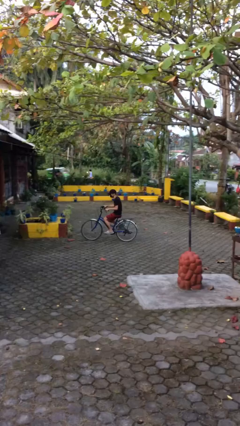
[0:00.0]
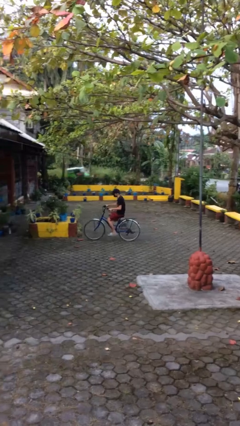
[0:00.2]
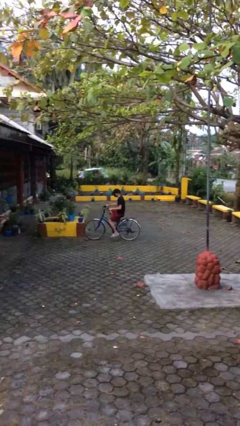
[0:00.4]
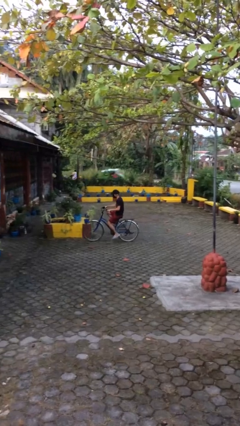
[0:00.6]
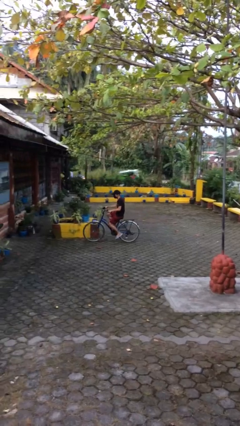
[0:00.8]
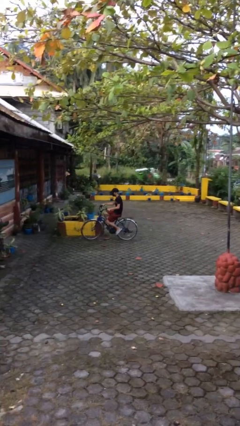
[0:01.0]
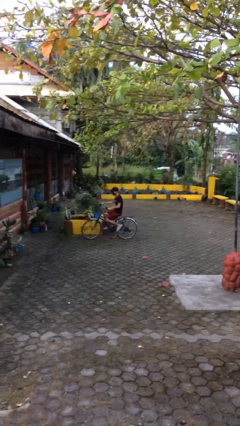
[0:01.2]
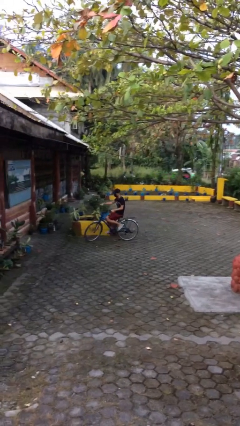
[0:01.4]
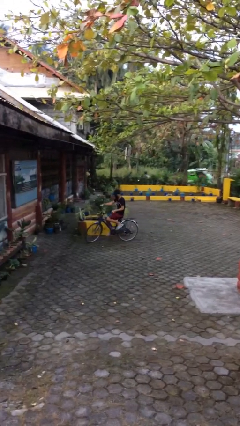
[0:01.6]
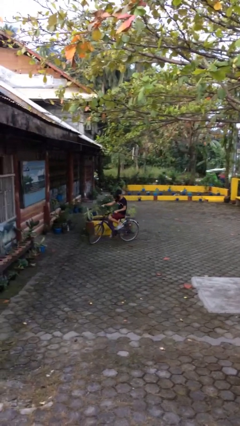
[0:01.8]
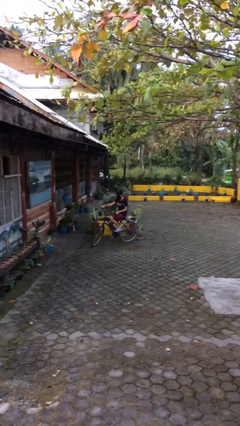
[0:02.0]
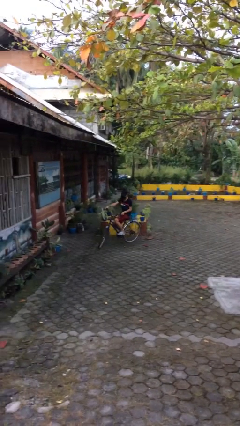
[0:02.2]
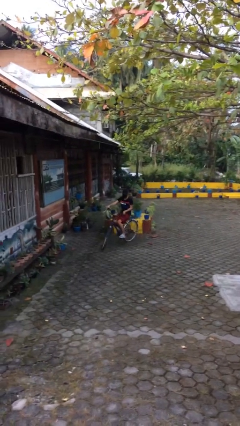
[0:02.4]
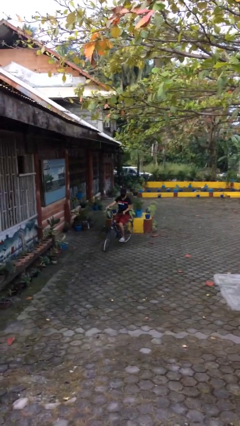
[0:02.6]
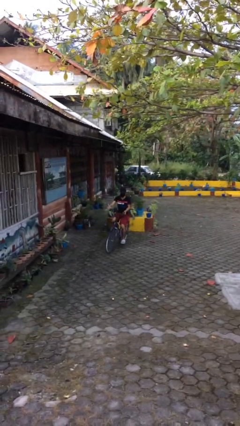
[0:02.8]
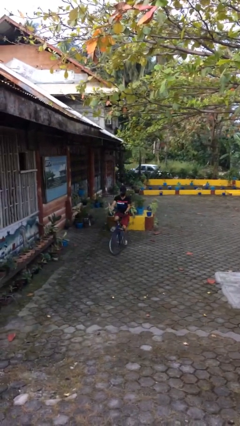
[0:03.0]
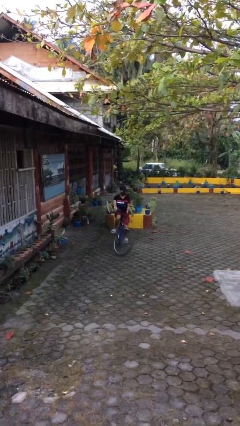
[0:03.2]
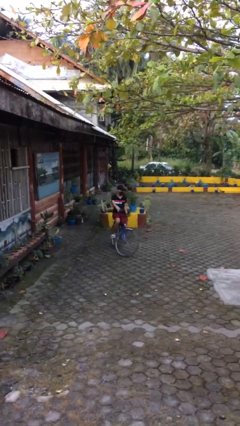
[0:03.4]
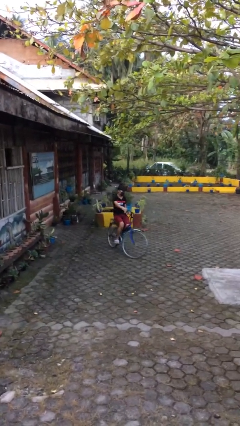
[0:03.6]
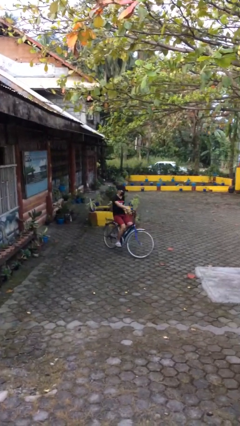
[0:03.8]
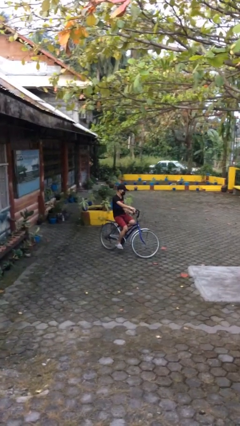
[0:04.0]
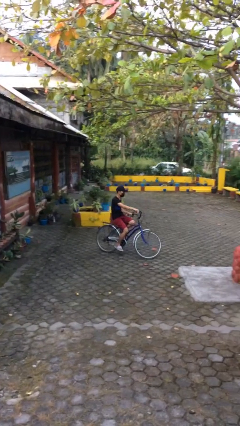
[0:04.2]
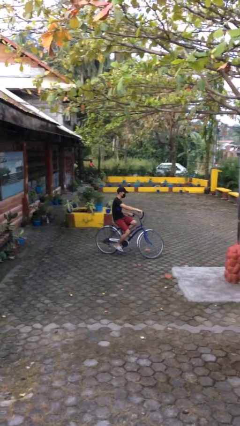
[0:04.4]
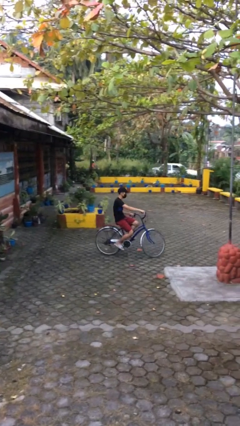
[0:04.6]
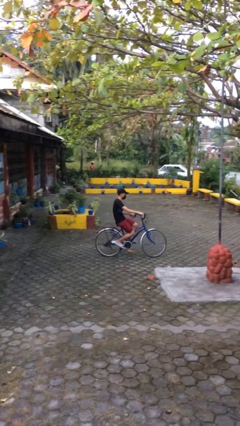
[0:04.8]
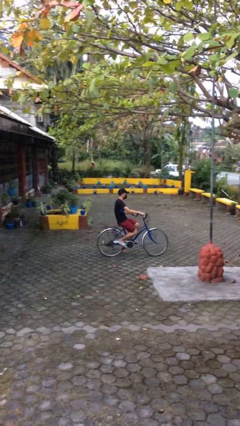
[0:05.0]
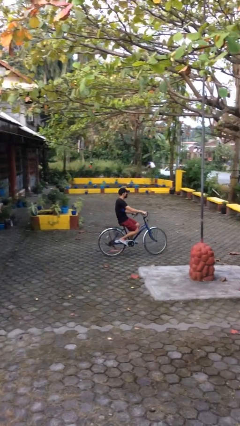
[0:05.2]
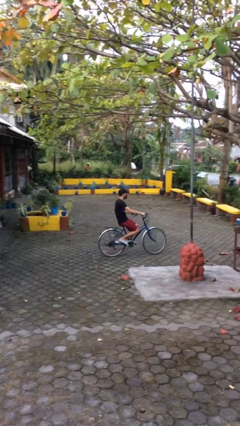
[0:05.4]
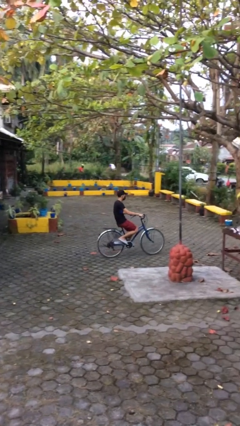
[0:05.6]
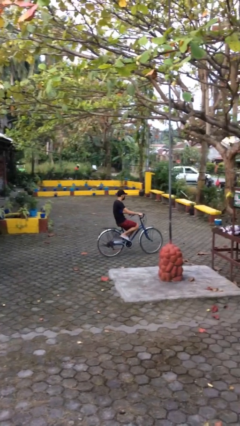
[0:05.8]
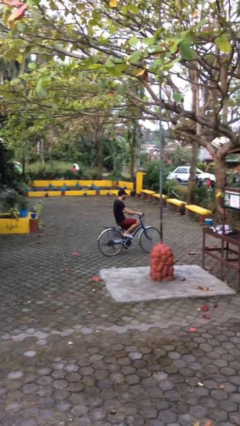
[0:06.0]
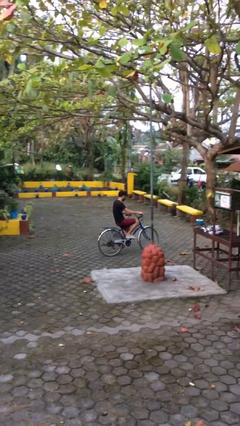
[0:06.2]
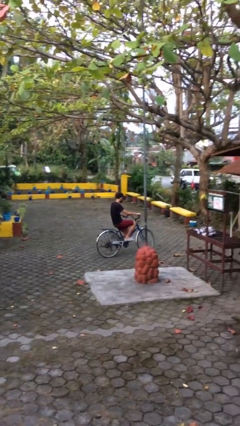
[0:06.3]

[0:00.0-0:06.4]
person rides bicycle

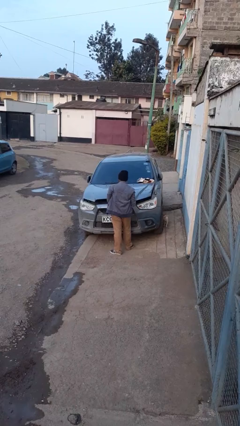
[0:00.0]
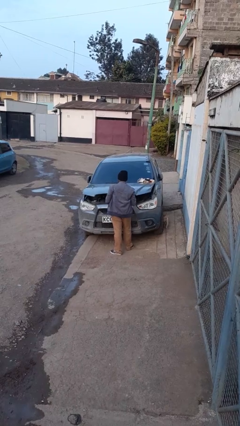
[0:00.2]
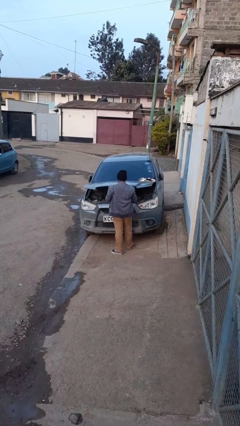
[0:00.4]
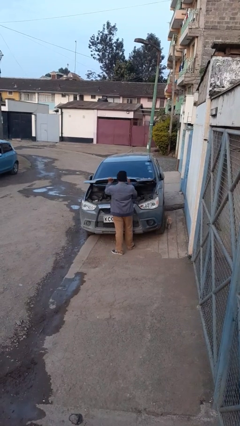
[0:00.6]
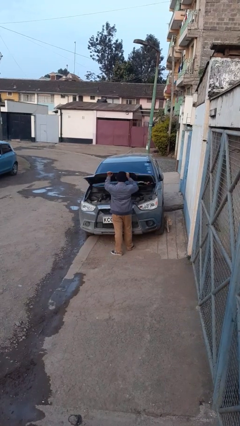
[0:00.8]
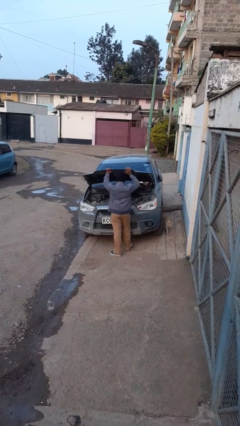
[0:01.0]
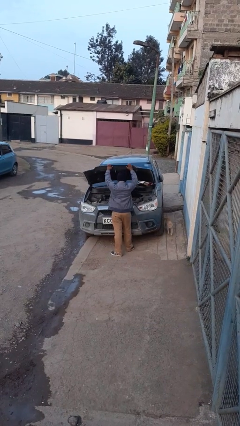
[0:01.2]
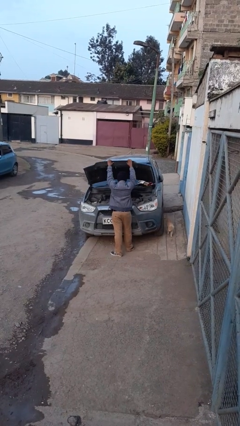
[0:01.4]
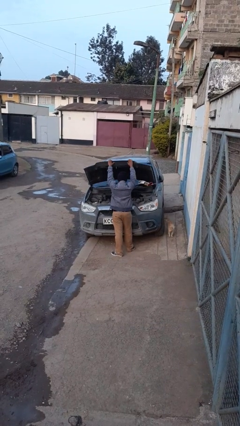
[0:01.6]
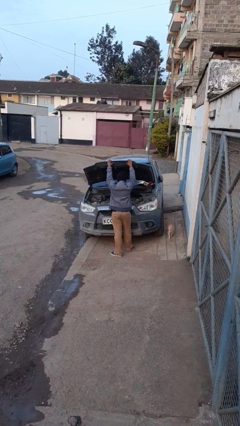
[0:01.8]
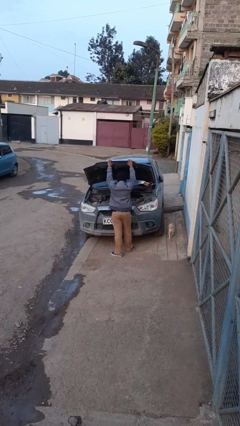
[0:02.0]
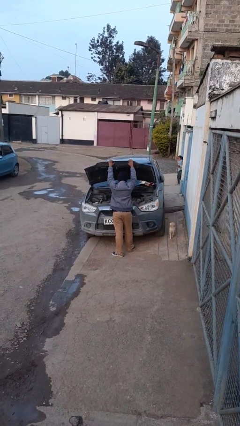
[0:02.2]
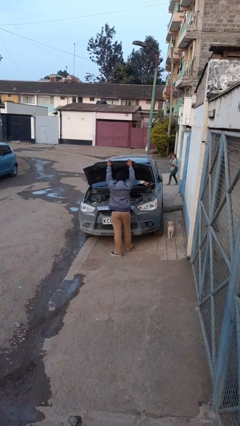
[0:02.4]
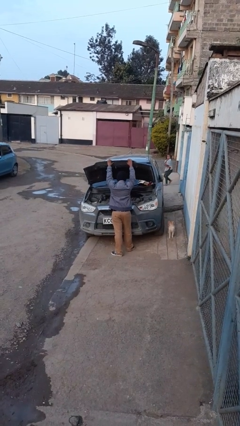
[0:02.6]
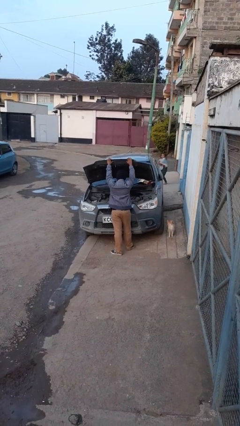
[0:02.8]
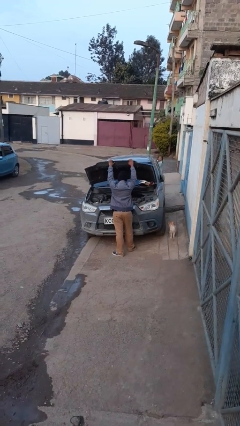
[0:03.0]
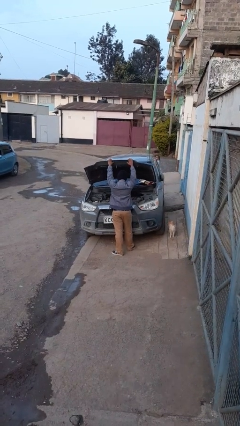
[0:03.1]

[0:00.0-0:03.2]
person opens car hood

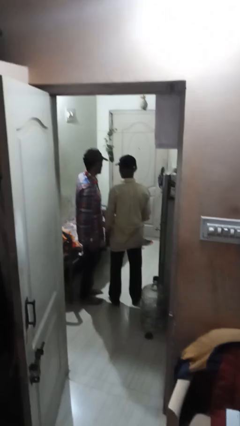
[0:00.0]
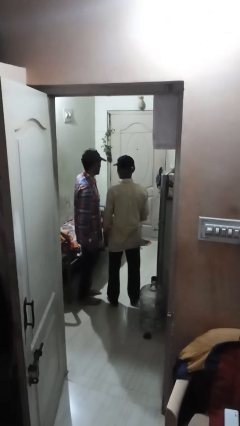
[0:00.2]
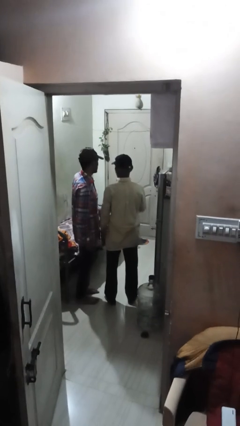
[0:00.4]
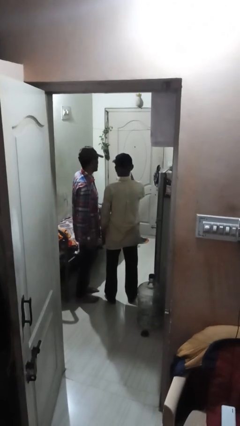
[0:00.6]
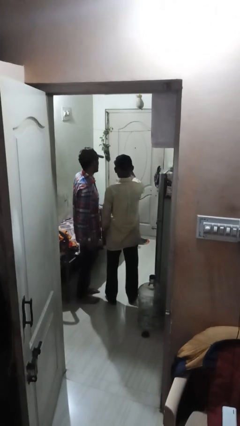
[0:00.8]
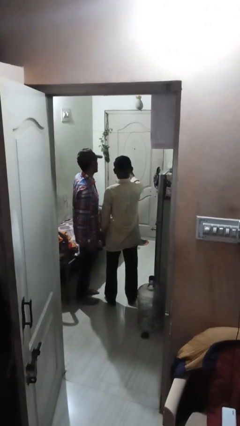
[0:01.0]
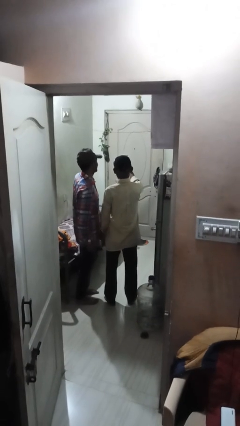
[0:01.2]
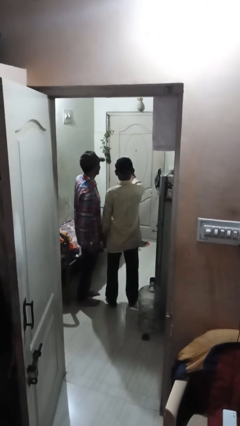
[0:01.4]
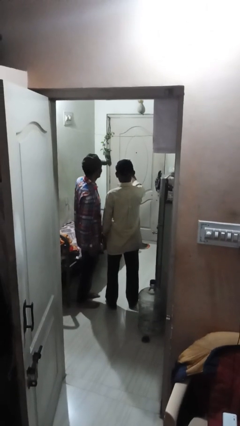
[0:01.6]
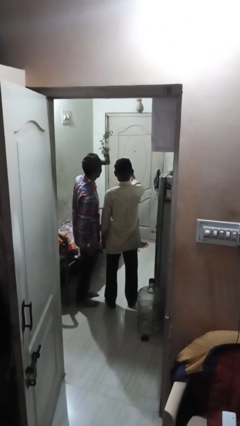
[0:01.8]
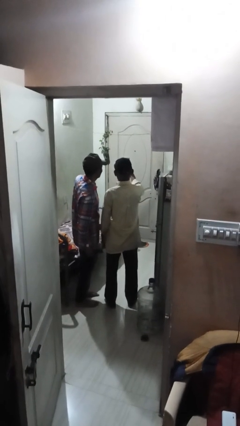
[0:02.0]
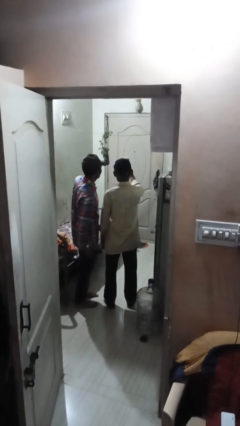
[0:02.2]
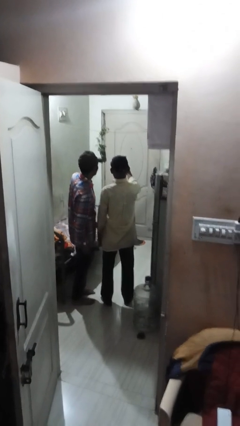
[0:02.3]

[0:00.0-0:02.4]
person takes selfie with person

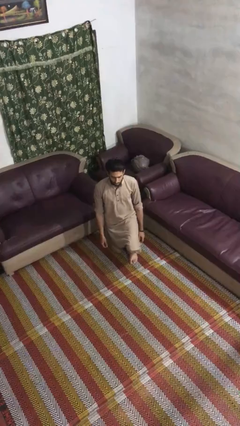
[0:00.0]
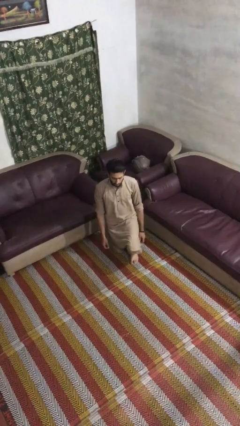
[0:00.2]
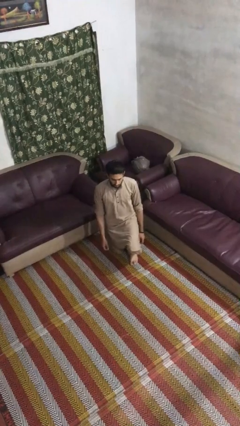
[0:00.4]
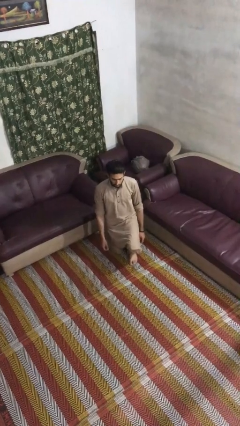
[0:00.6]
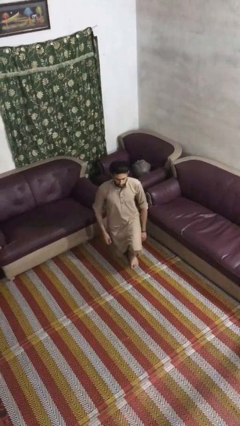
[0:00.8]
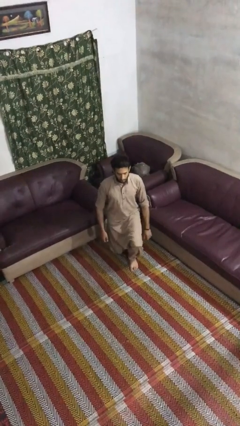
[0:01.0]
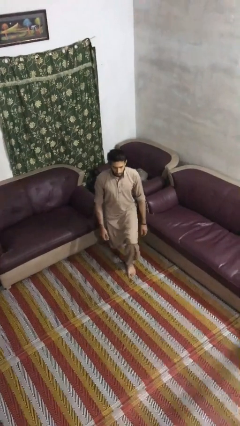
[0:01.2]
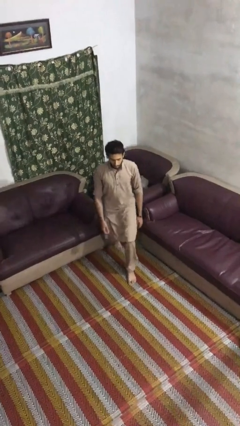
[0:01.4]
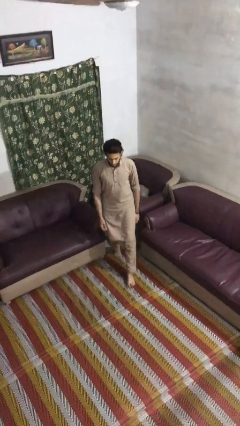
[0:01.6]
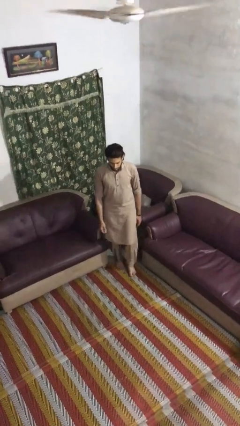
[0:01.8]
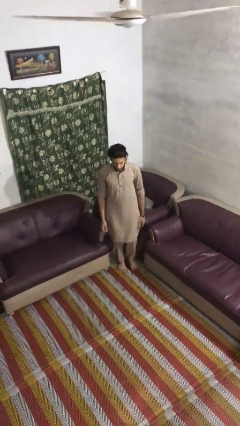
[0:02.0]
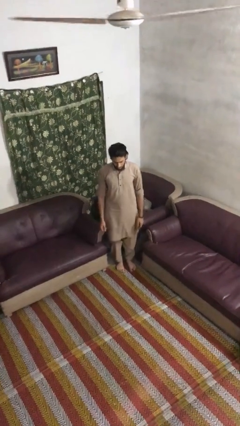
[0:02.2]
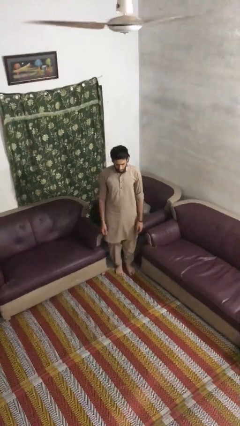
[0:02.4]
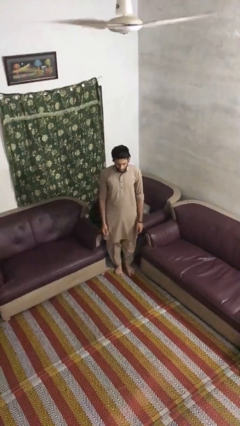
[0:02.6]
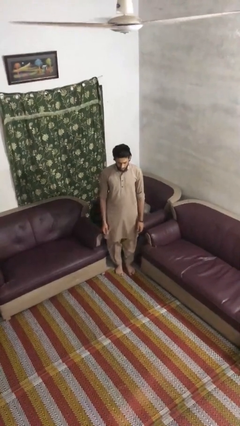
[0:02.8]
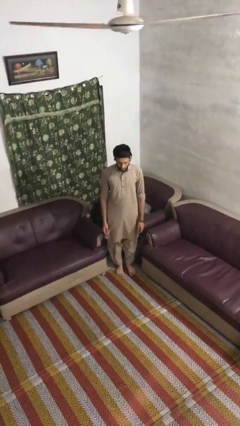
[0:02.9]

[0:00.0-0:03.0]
person stands up from floor

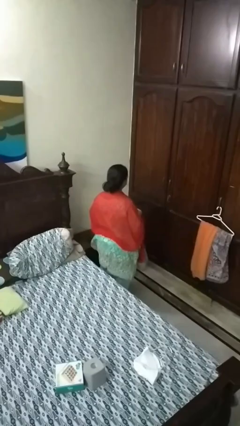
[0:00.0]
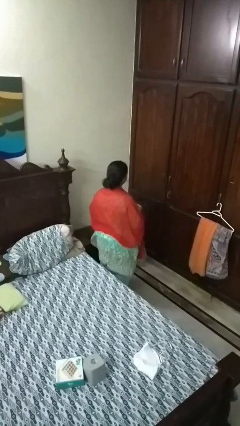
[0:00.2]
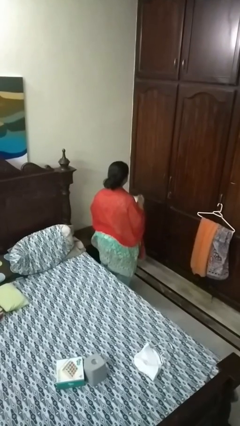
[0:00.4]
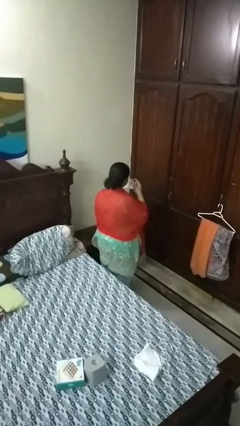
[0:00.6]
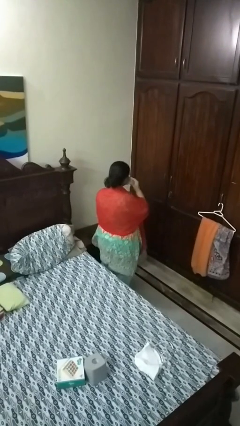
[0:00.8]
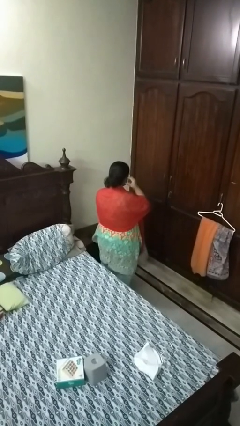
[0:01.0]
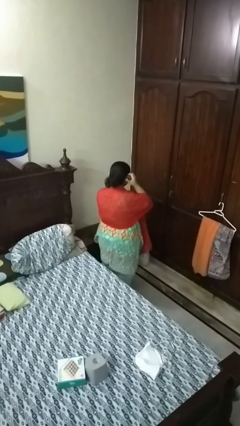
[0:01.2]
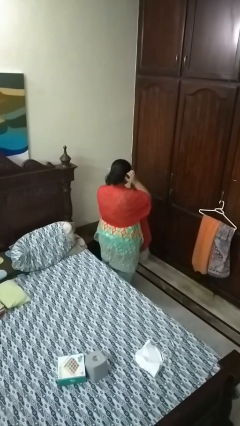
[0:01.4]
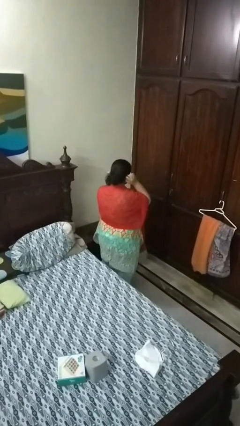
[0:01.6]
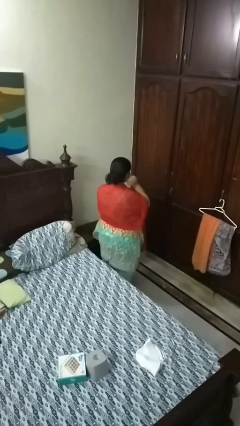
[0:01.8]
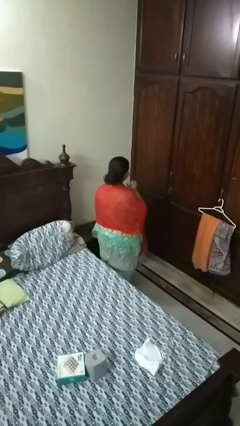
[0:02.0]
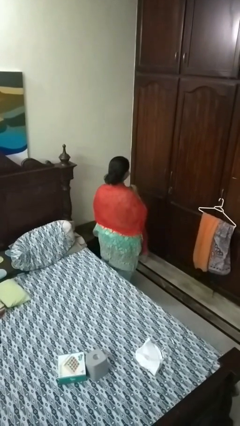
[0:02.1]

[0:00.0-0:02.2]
person puts on facemask

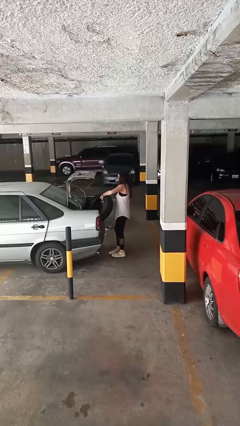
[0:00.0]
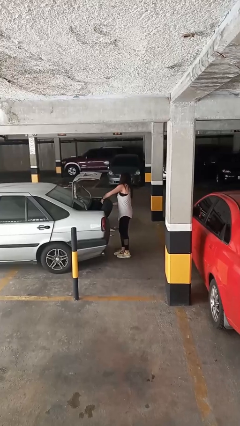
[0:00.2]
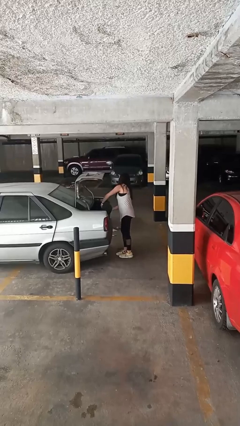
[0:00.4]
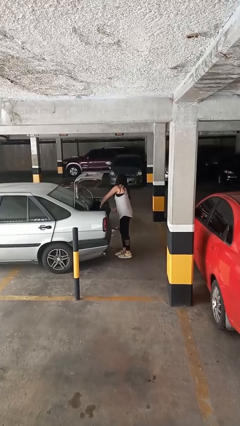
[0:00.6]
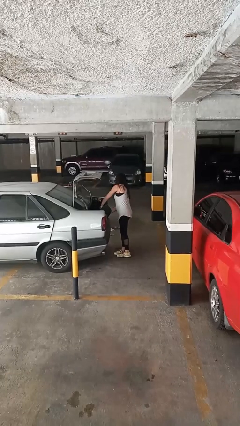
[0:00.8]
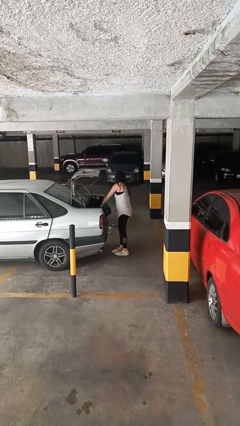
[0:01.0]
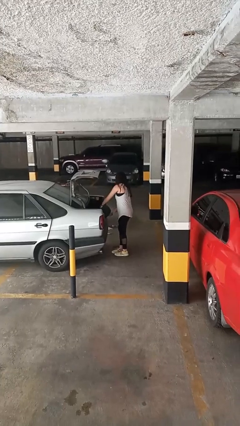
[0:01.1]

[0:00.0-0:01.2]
person loads car
